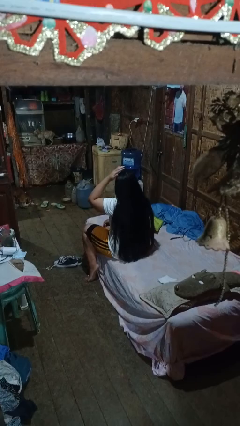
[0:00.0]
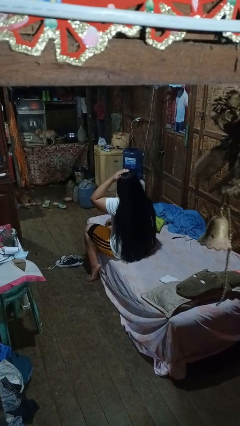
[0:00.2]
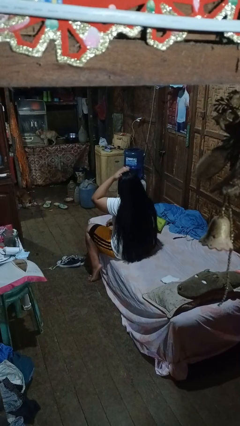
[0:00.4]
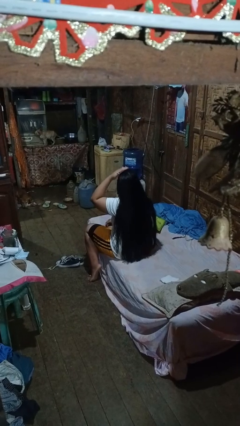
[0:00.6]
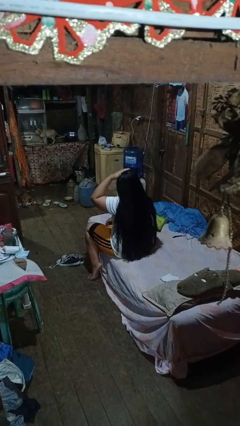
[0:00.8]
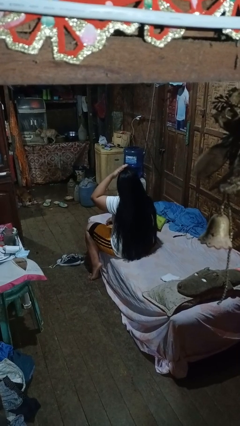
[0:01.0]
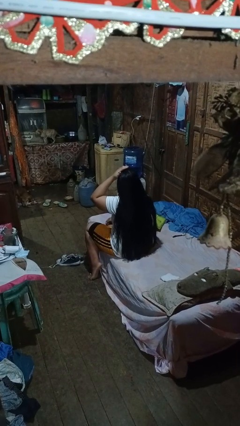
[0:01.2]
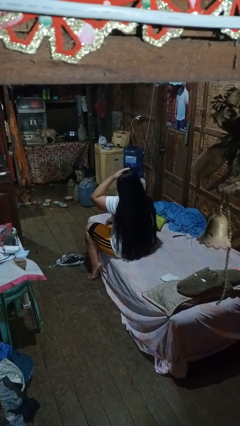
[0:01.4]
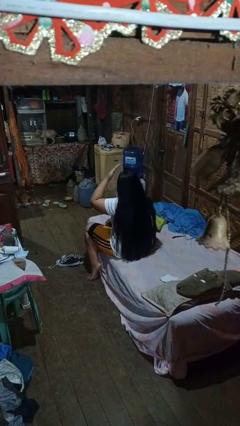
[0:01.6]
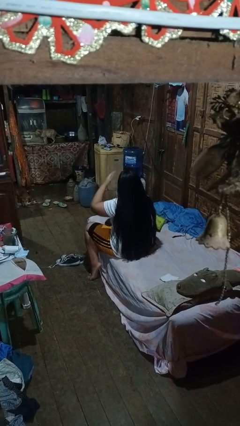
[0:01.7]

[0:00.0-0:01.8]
person pats head

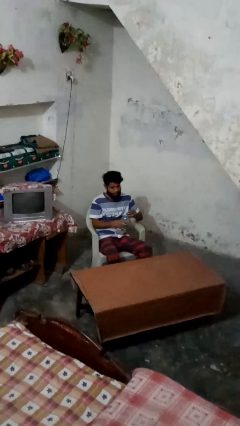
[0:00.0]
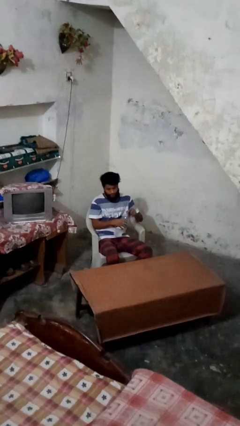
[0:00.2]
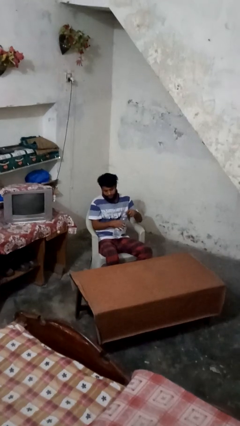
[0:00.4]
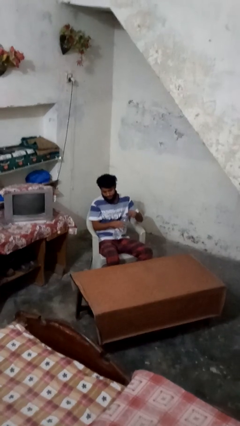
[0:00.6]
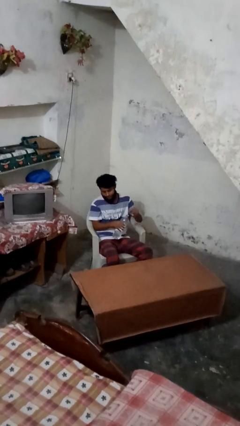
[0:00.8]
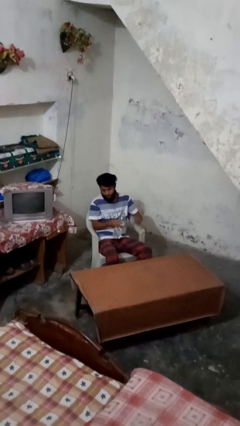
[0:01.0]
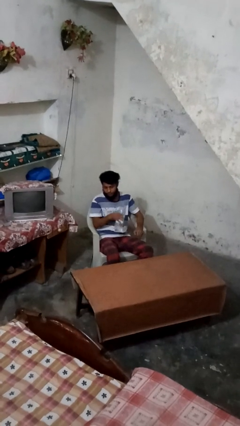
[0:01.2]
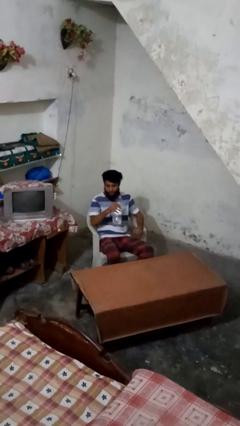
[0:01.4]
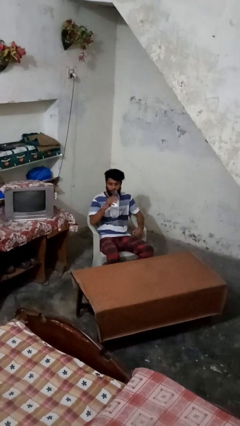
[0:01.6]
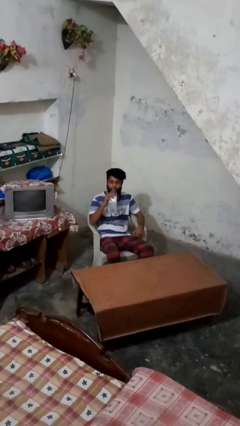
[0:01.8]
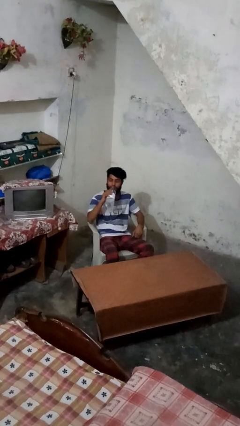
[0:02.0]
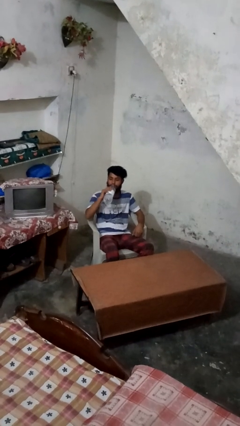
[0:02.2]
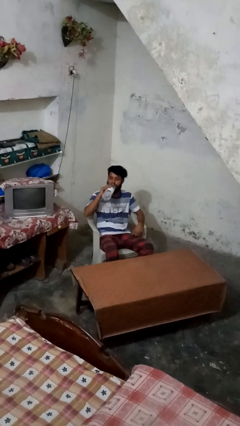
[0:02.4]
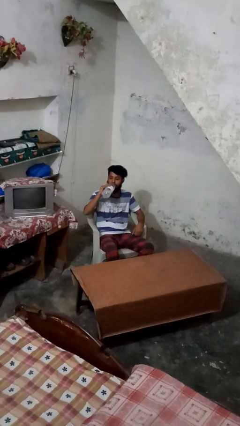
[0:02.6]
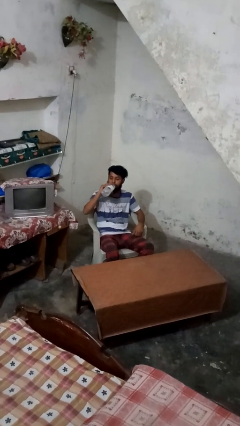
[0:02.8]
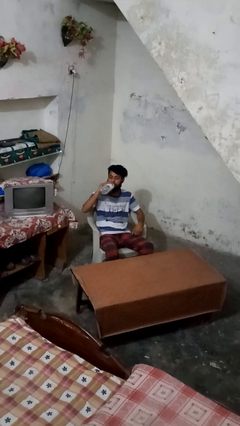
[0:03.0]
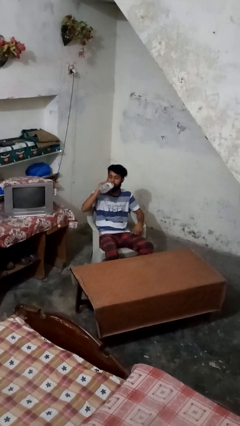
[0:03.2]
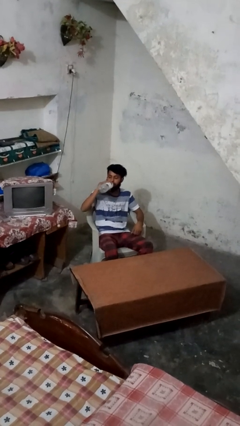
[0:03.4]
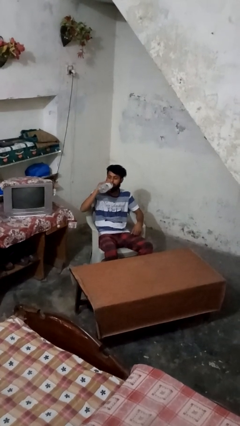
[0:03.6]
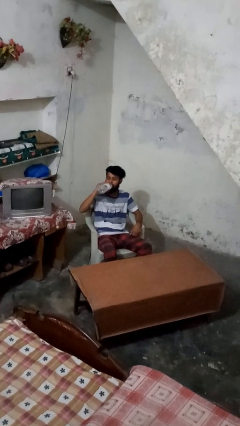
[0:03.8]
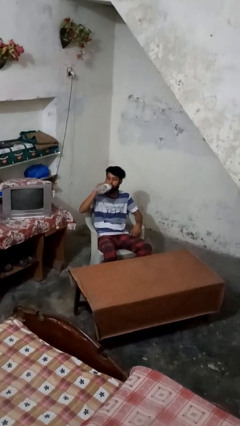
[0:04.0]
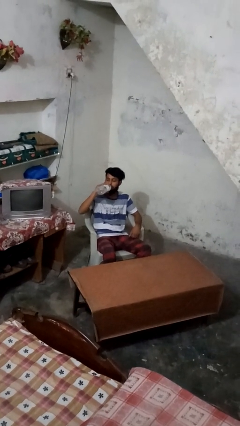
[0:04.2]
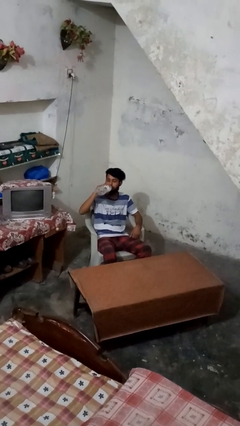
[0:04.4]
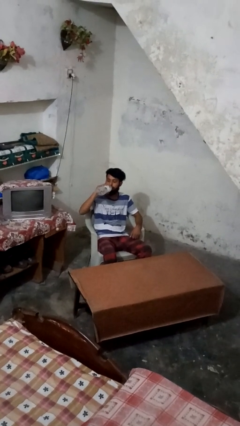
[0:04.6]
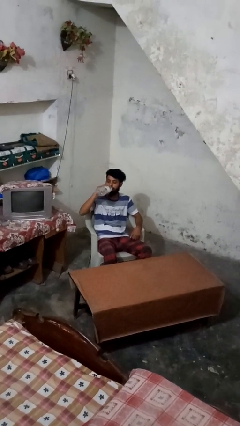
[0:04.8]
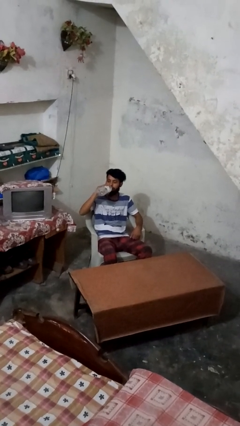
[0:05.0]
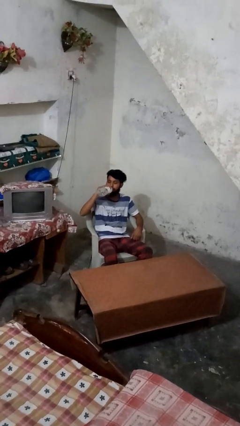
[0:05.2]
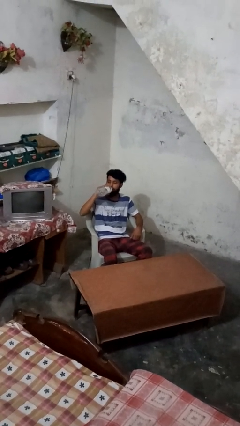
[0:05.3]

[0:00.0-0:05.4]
person drinks from bottle

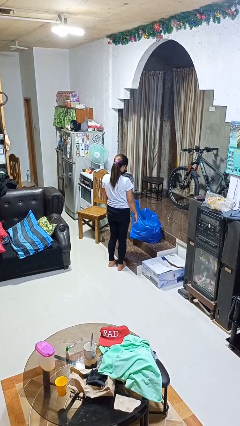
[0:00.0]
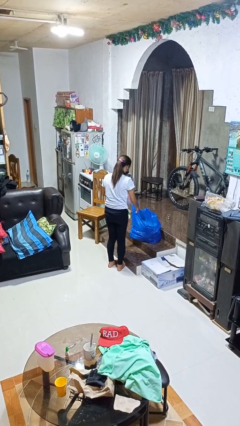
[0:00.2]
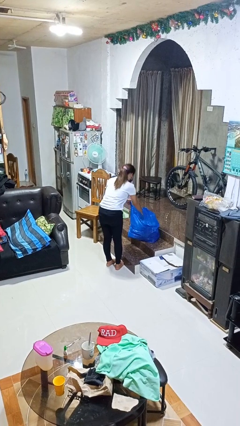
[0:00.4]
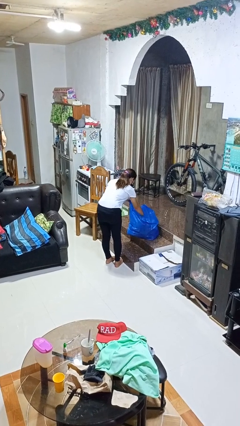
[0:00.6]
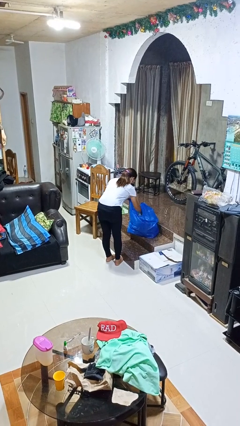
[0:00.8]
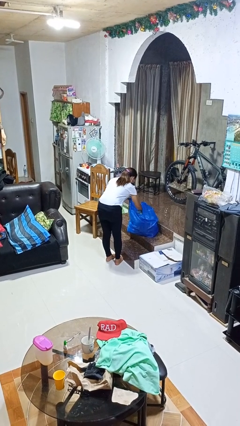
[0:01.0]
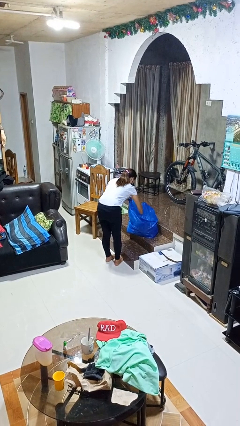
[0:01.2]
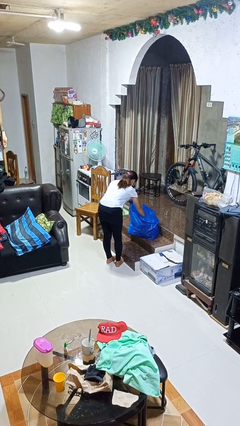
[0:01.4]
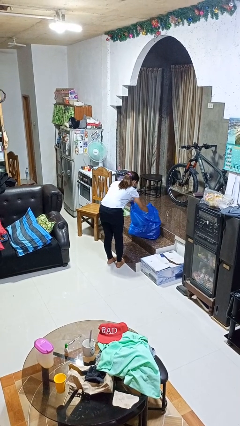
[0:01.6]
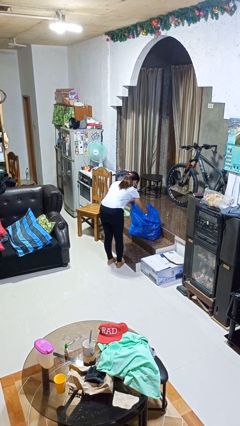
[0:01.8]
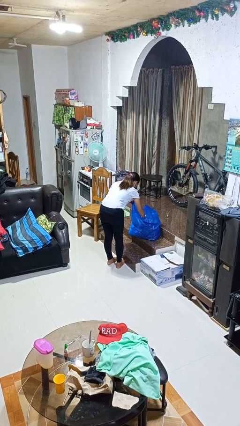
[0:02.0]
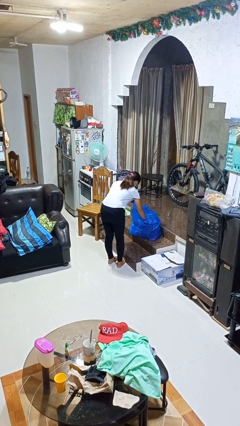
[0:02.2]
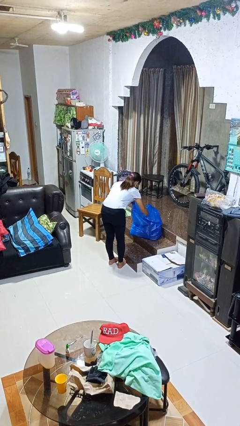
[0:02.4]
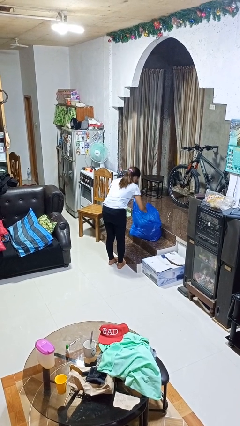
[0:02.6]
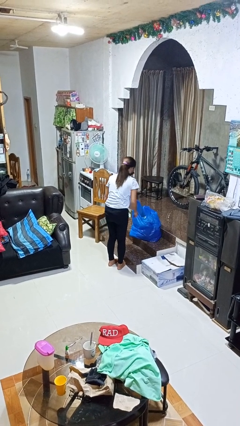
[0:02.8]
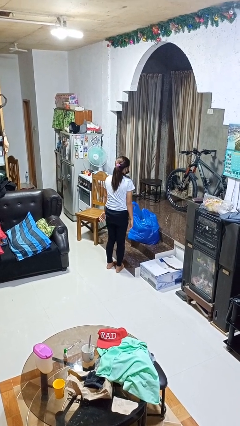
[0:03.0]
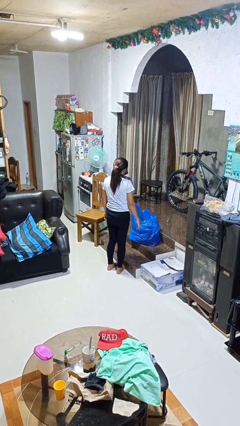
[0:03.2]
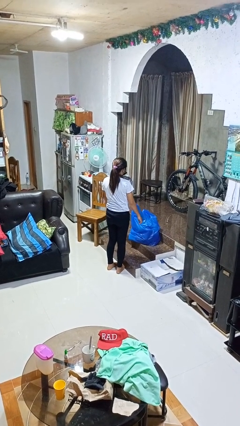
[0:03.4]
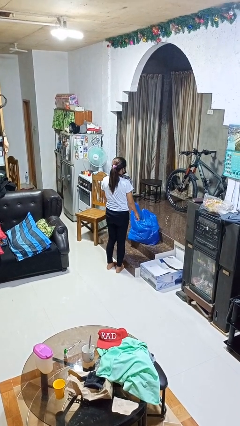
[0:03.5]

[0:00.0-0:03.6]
person searches in bag

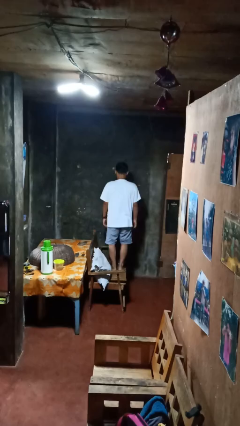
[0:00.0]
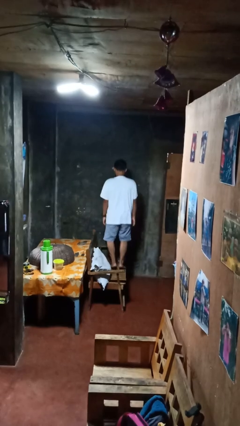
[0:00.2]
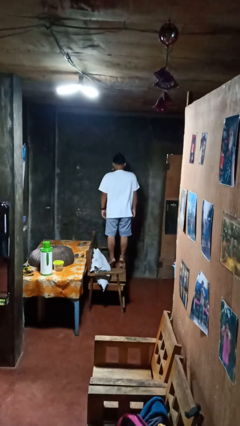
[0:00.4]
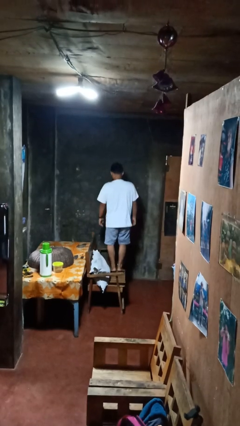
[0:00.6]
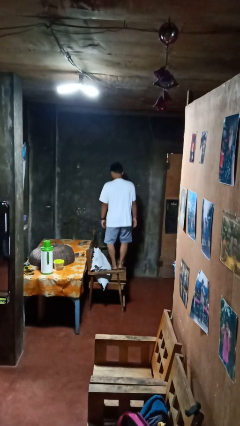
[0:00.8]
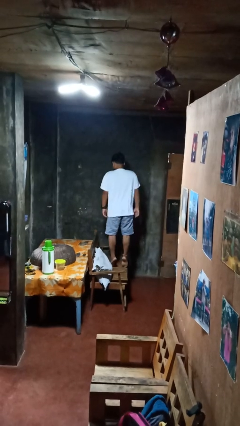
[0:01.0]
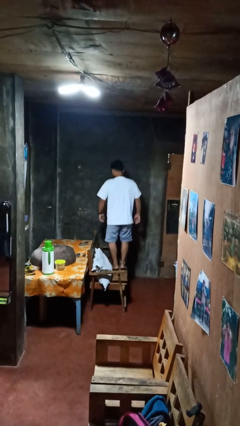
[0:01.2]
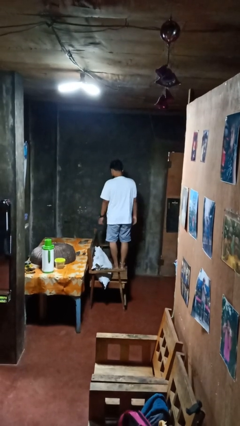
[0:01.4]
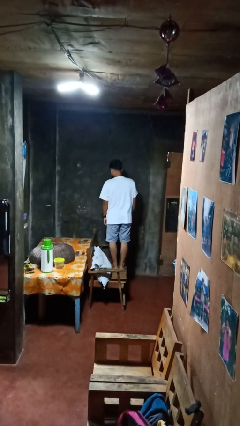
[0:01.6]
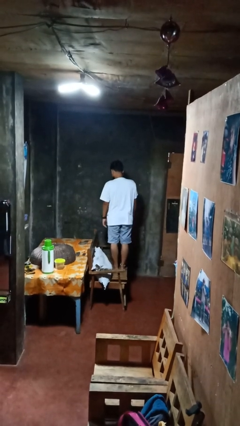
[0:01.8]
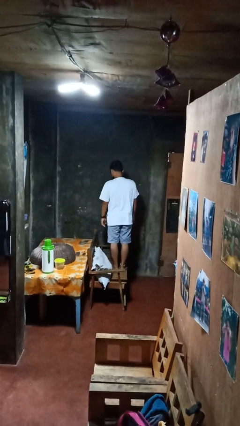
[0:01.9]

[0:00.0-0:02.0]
person jumps on couch

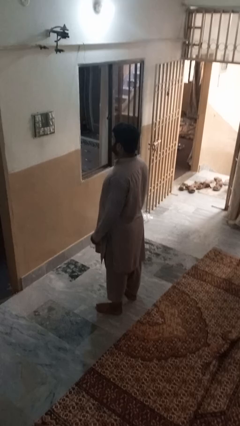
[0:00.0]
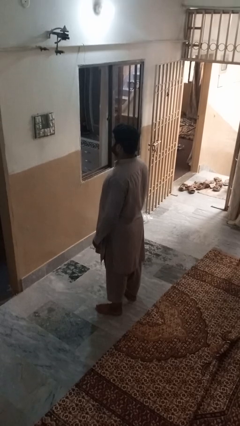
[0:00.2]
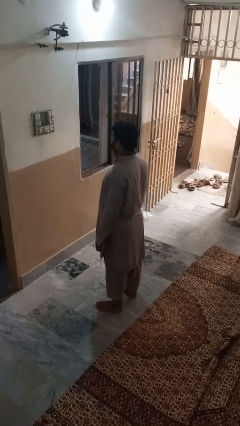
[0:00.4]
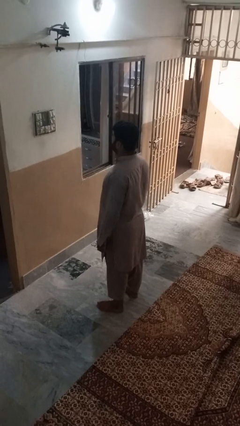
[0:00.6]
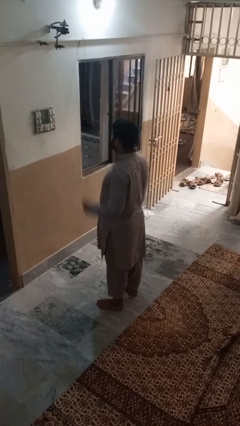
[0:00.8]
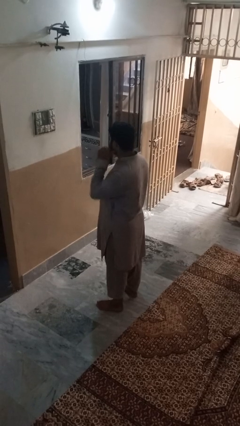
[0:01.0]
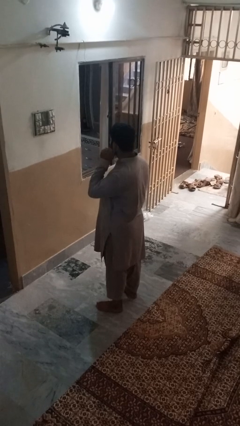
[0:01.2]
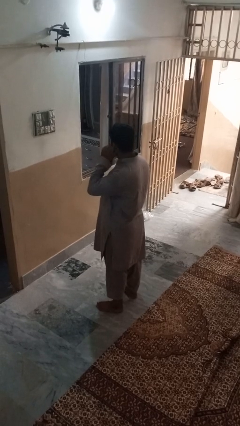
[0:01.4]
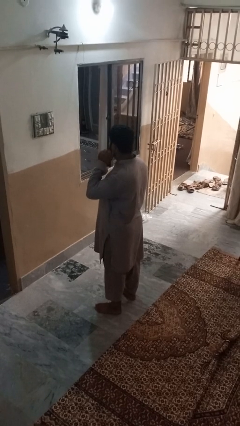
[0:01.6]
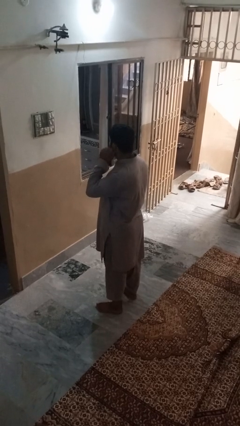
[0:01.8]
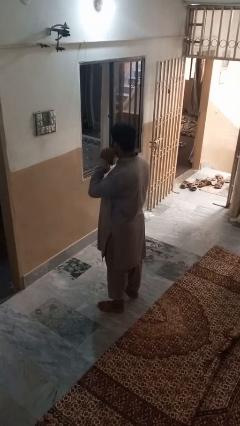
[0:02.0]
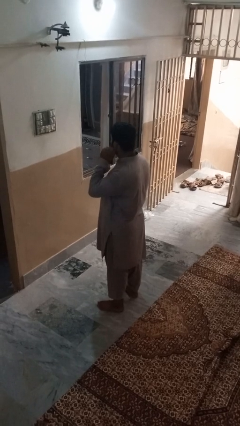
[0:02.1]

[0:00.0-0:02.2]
person touches earlobe

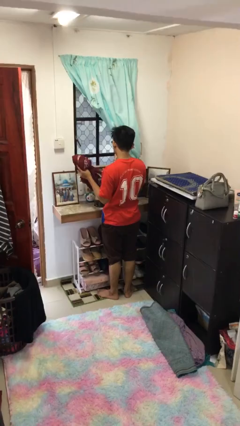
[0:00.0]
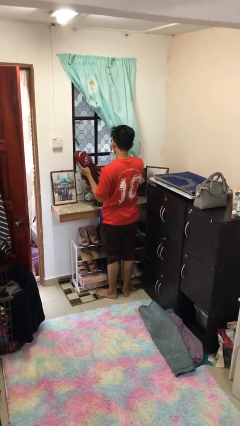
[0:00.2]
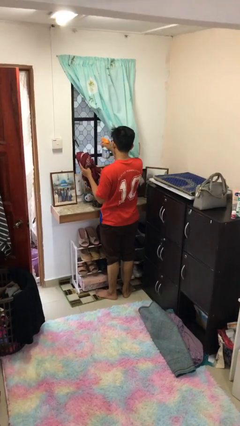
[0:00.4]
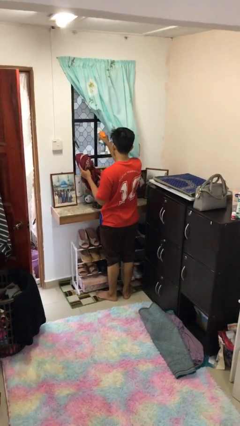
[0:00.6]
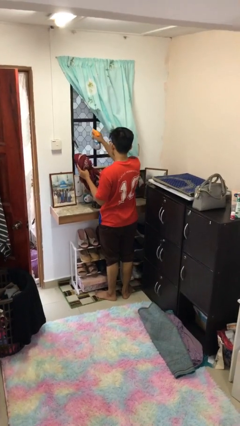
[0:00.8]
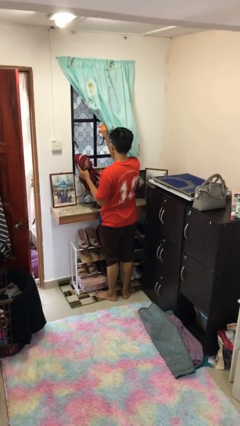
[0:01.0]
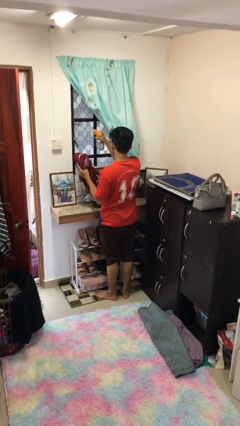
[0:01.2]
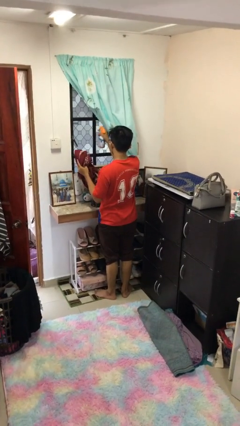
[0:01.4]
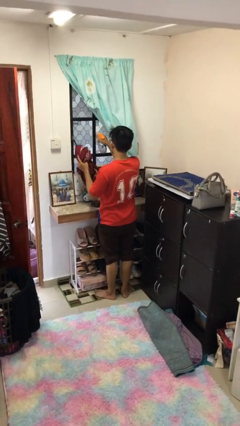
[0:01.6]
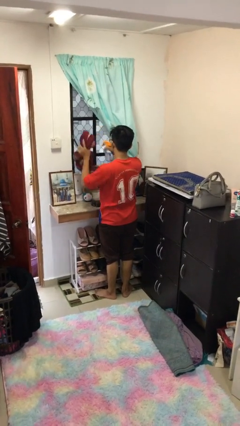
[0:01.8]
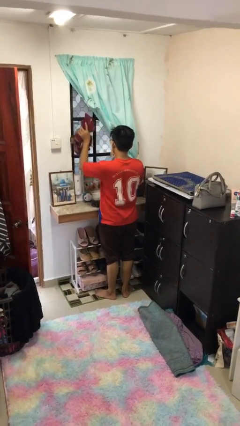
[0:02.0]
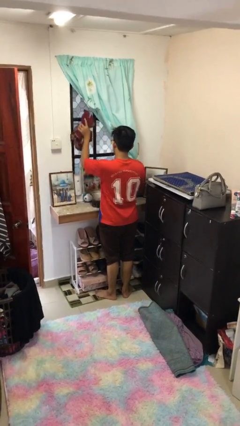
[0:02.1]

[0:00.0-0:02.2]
person sprays from bottle
